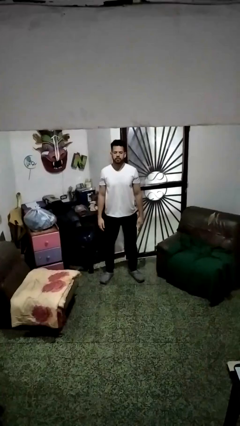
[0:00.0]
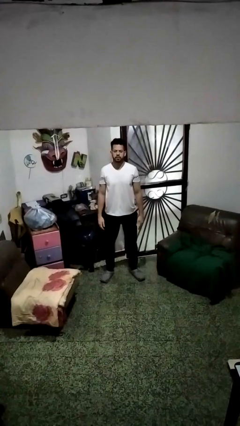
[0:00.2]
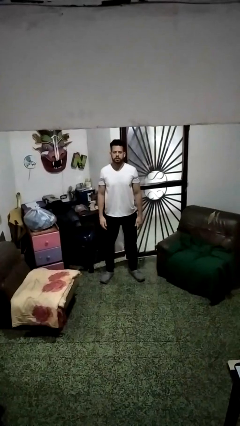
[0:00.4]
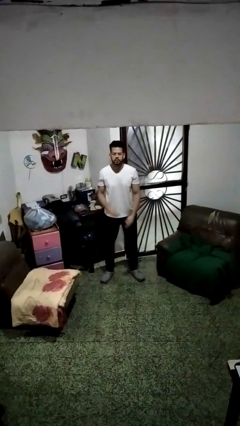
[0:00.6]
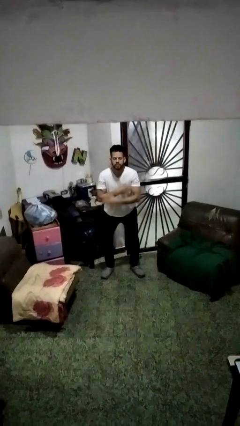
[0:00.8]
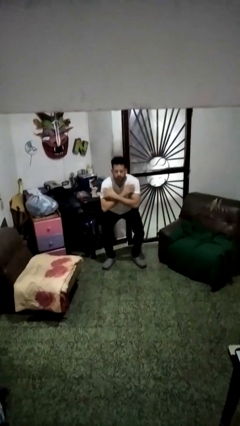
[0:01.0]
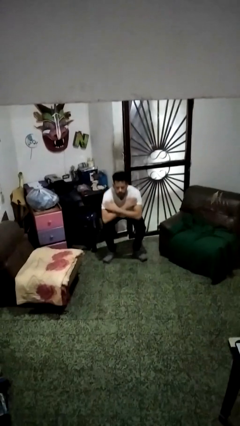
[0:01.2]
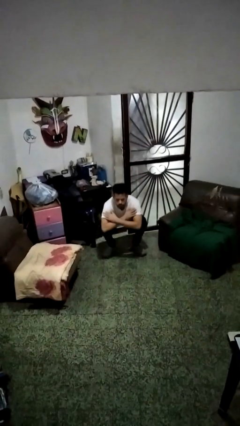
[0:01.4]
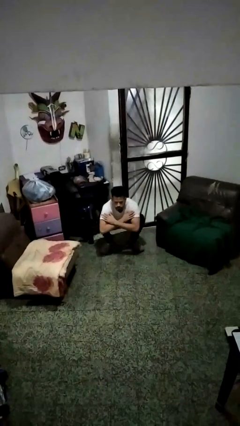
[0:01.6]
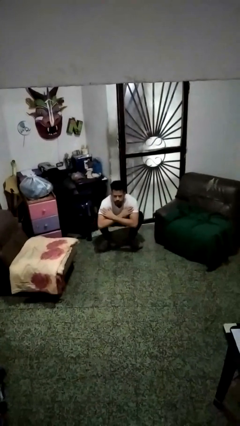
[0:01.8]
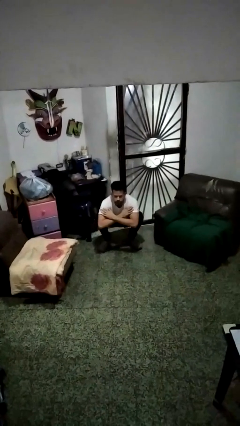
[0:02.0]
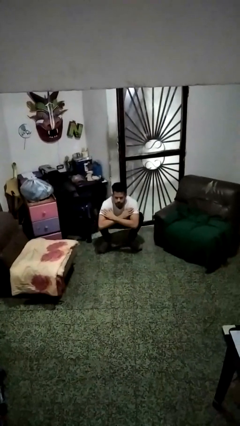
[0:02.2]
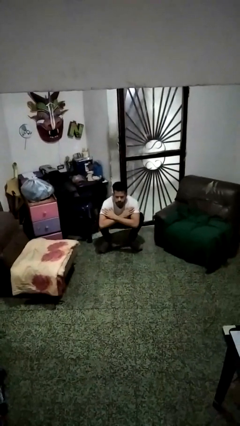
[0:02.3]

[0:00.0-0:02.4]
person squats

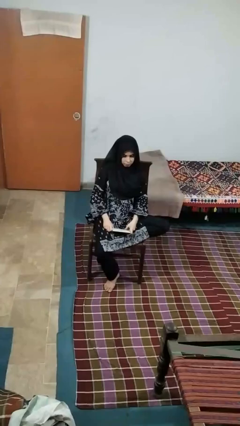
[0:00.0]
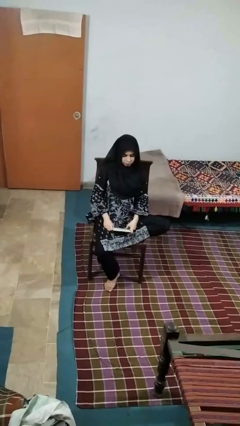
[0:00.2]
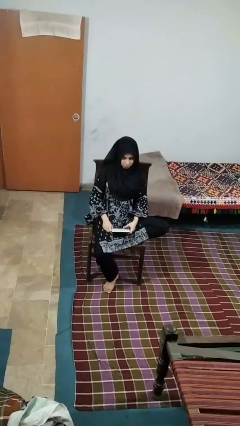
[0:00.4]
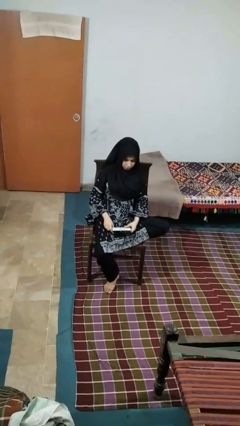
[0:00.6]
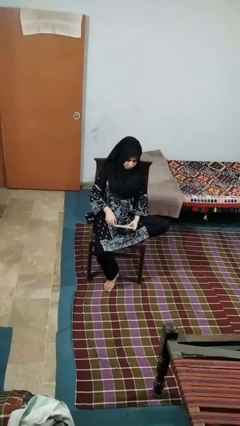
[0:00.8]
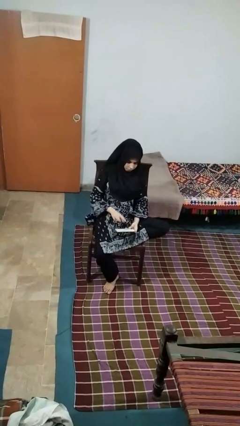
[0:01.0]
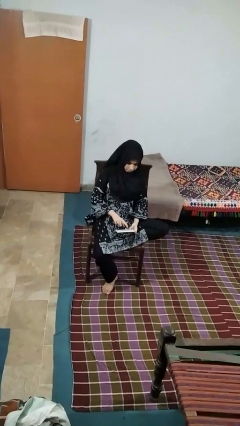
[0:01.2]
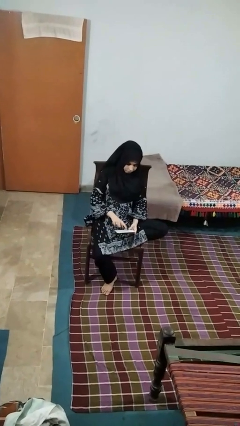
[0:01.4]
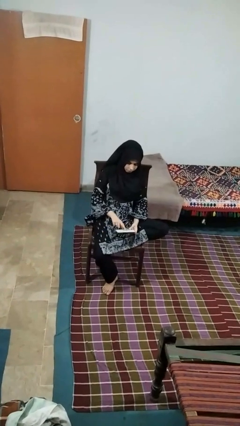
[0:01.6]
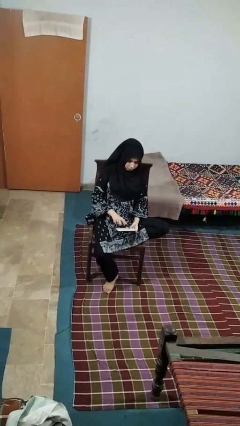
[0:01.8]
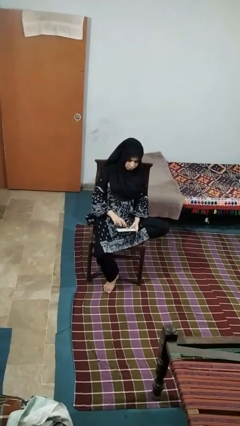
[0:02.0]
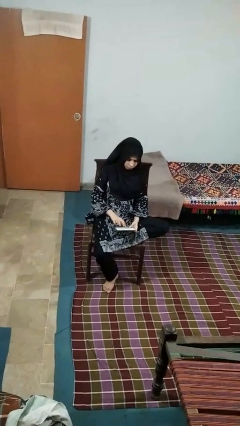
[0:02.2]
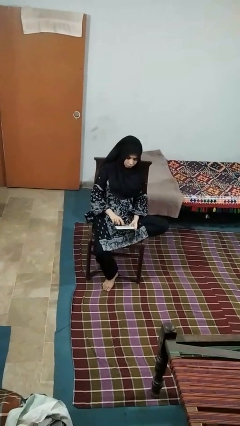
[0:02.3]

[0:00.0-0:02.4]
person taps object with finger

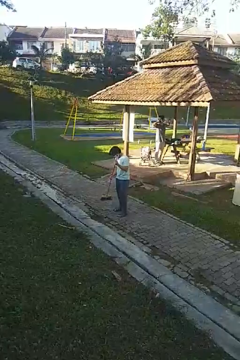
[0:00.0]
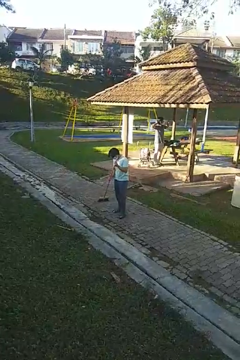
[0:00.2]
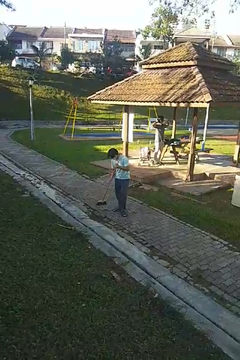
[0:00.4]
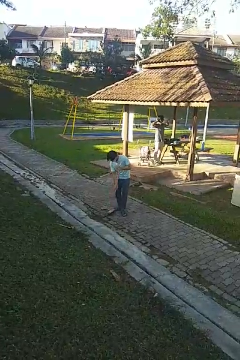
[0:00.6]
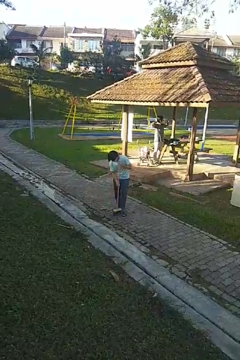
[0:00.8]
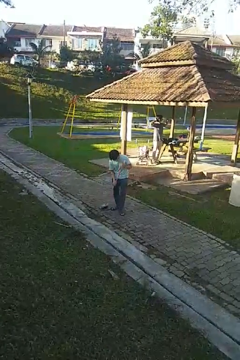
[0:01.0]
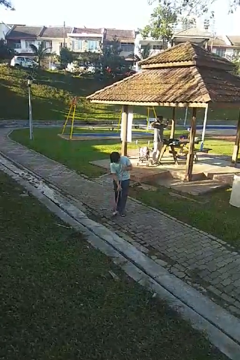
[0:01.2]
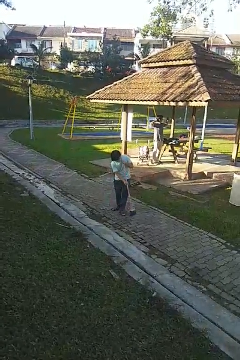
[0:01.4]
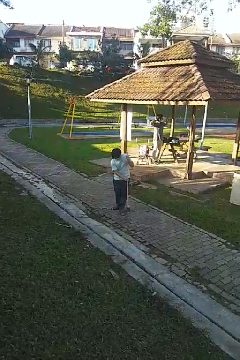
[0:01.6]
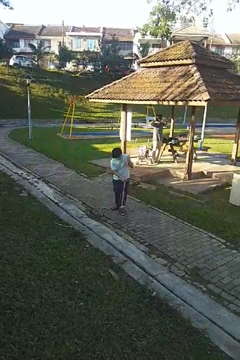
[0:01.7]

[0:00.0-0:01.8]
person sweeps floor

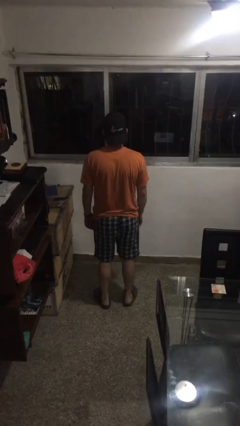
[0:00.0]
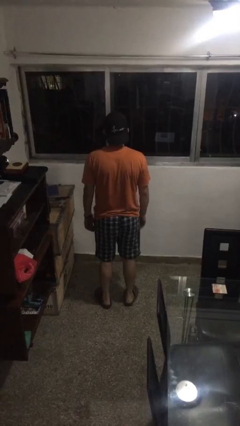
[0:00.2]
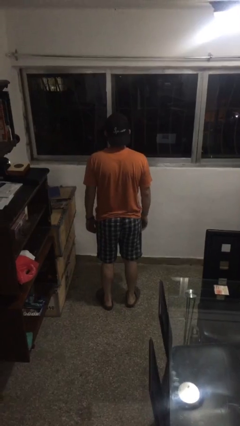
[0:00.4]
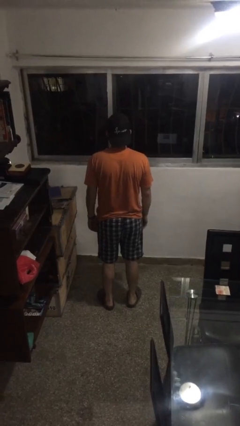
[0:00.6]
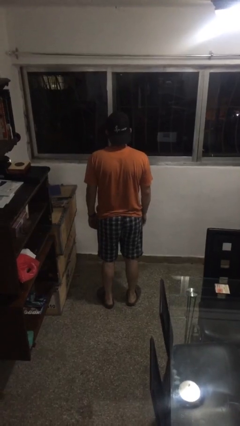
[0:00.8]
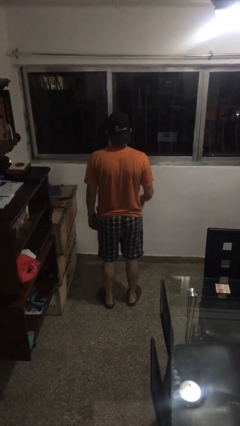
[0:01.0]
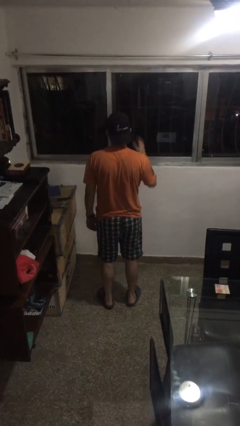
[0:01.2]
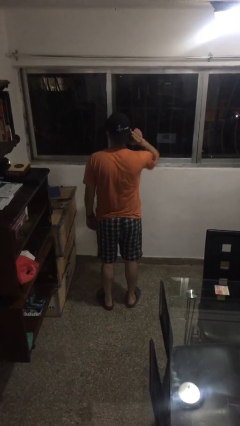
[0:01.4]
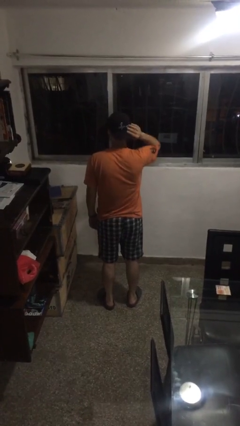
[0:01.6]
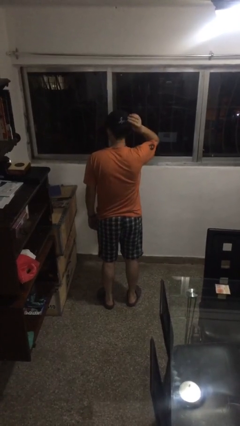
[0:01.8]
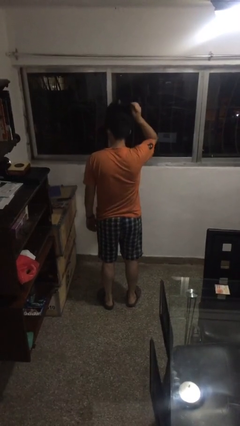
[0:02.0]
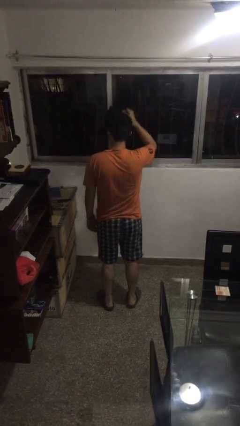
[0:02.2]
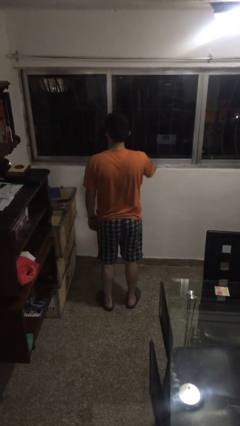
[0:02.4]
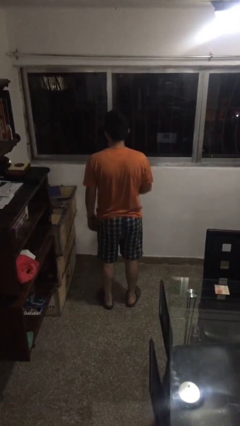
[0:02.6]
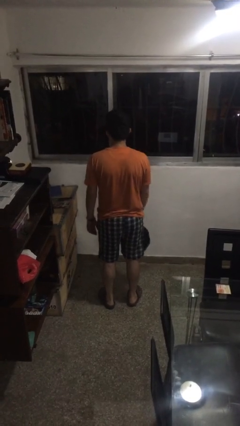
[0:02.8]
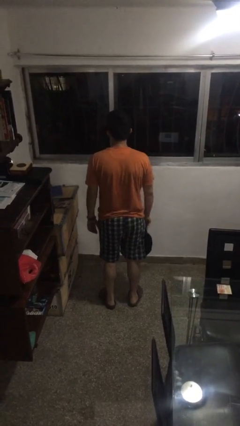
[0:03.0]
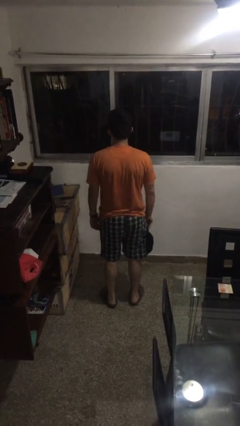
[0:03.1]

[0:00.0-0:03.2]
person takes off hat

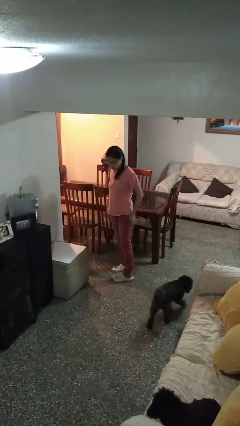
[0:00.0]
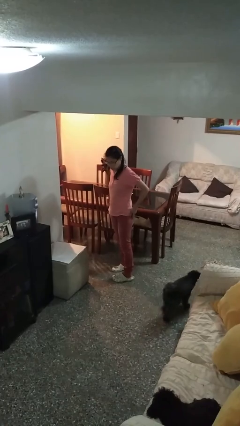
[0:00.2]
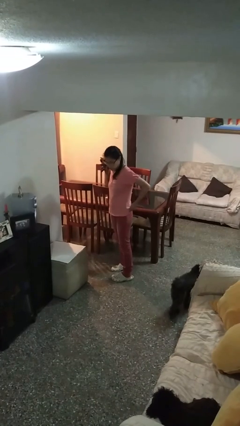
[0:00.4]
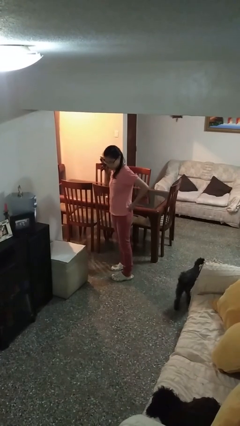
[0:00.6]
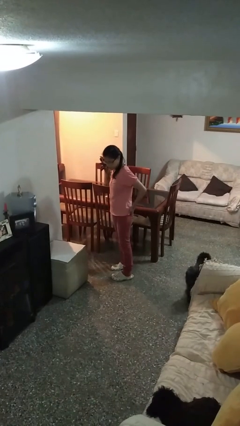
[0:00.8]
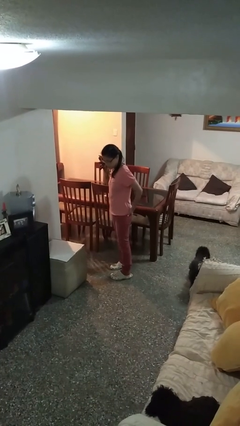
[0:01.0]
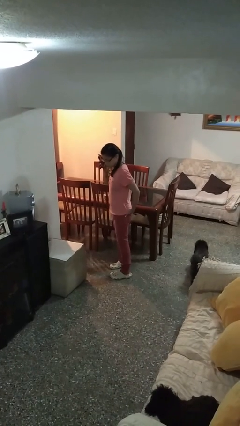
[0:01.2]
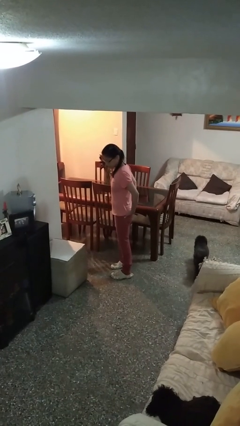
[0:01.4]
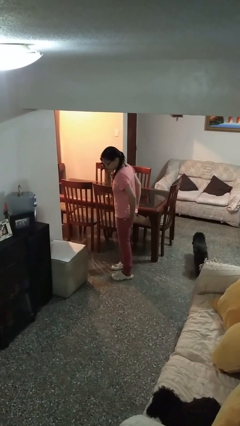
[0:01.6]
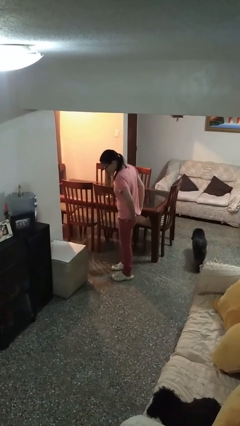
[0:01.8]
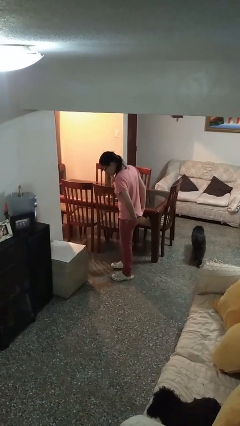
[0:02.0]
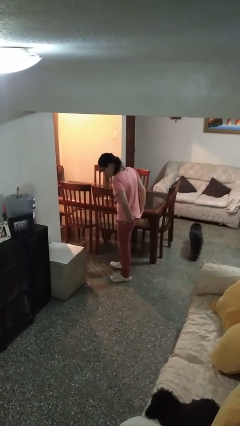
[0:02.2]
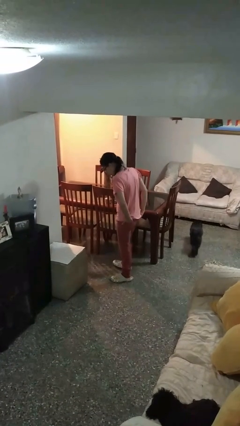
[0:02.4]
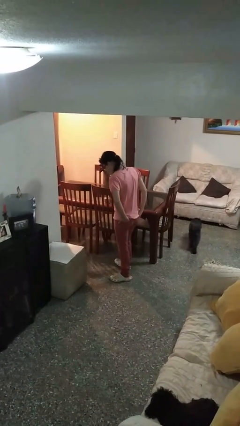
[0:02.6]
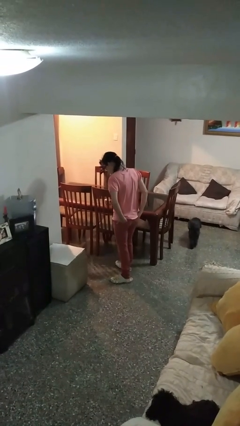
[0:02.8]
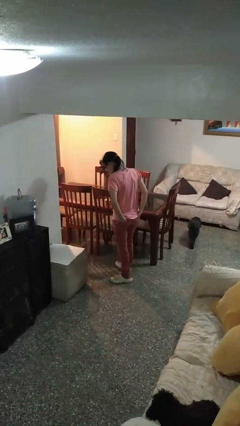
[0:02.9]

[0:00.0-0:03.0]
person puts hands in back pockets

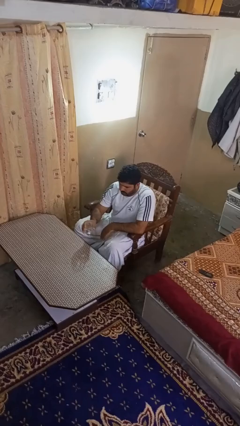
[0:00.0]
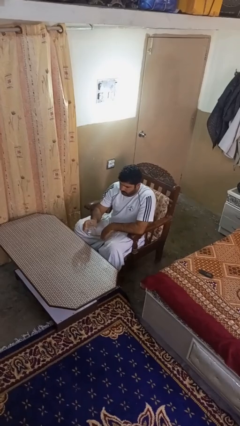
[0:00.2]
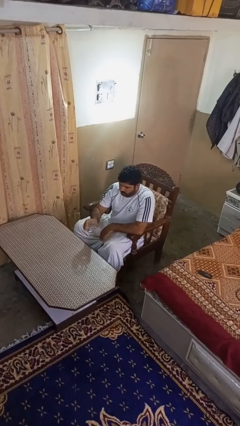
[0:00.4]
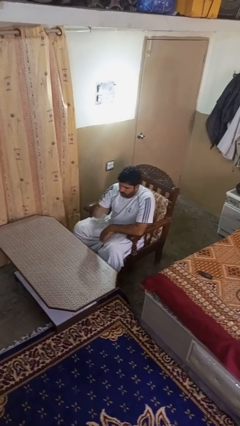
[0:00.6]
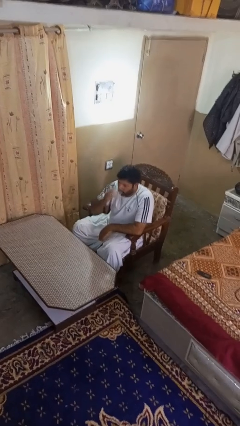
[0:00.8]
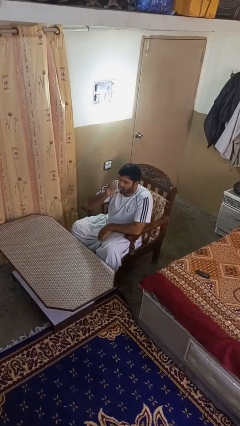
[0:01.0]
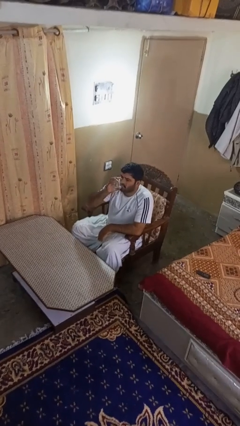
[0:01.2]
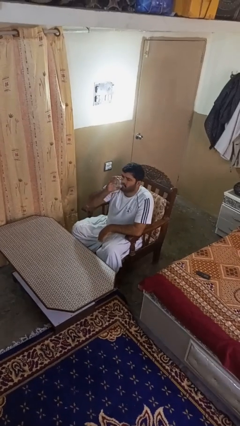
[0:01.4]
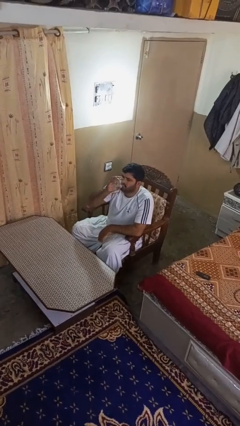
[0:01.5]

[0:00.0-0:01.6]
person drinks from shotglass

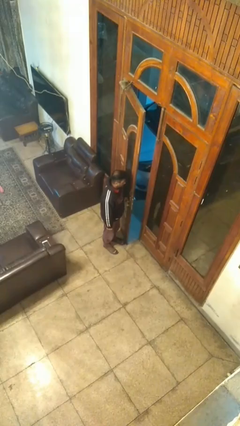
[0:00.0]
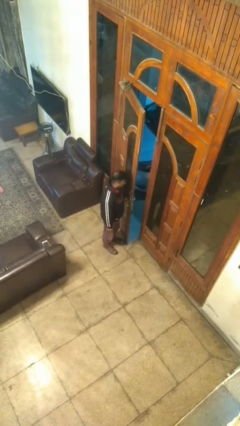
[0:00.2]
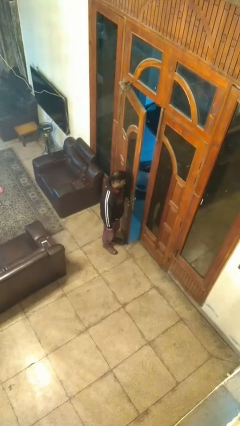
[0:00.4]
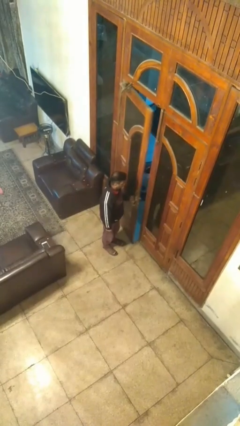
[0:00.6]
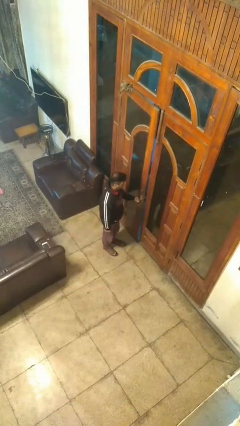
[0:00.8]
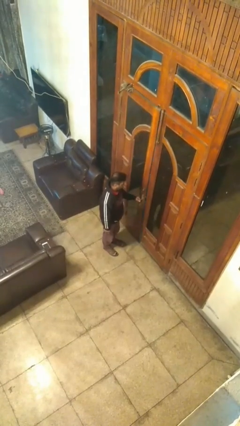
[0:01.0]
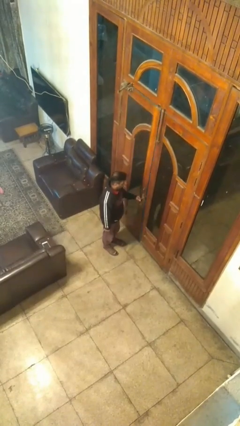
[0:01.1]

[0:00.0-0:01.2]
person closes facility door

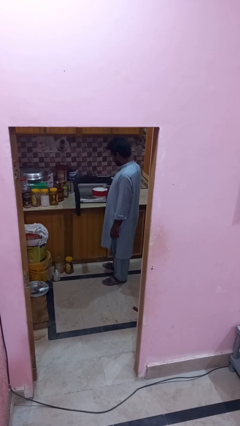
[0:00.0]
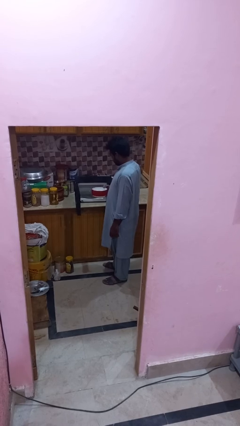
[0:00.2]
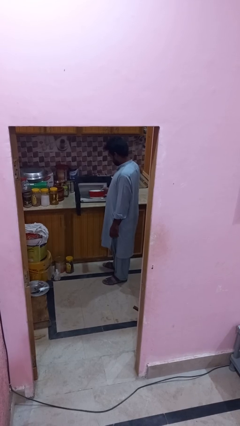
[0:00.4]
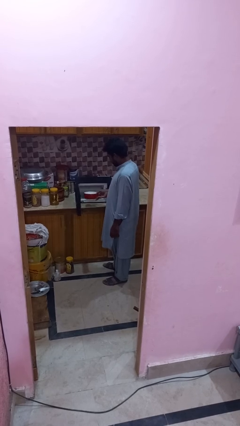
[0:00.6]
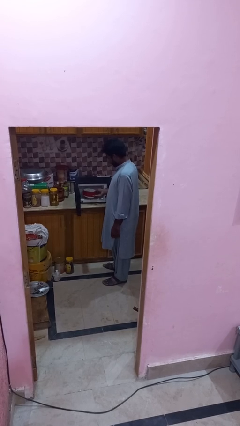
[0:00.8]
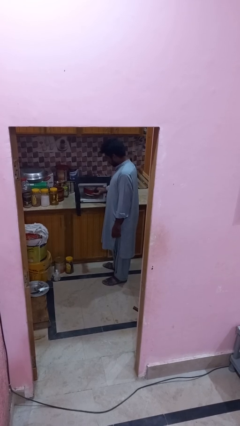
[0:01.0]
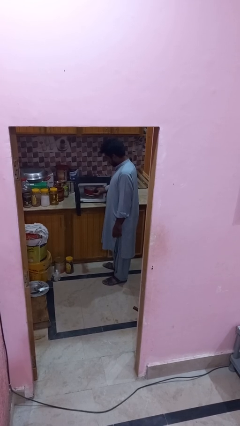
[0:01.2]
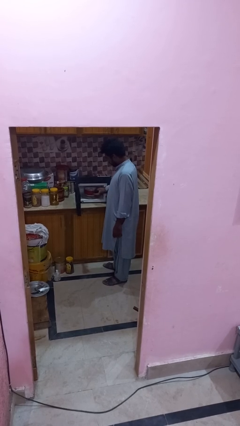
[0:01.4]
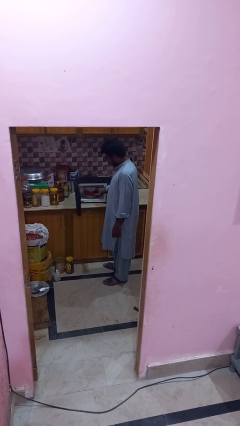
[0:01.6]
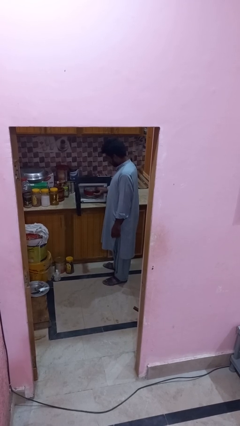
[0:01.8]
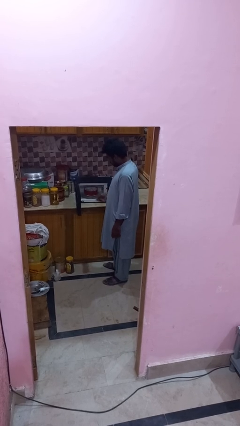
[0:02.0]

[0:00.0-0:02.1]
person puts object into microwave
